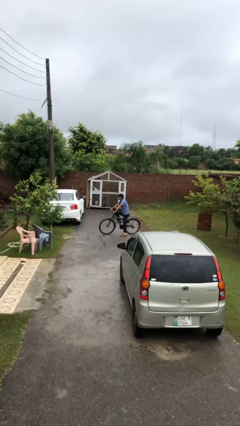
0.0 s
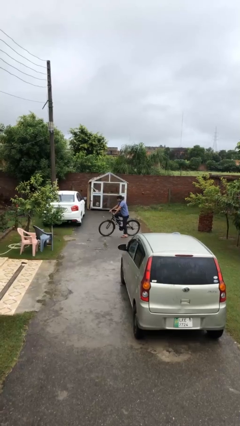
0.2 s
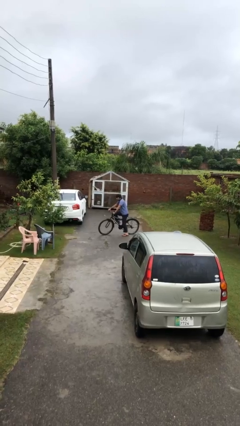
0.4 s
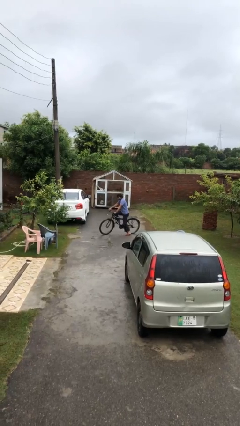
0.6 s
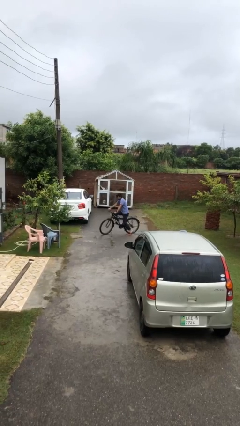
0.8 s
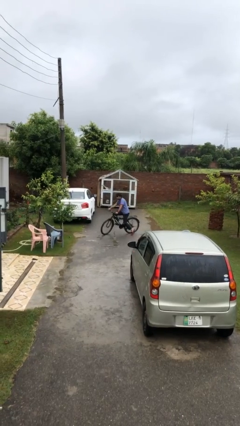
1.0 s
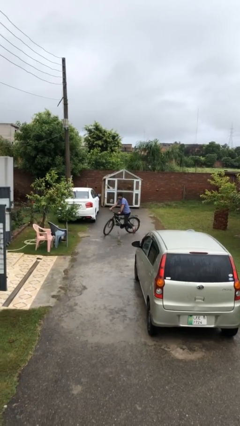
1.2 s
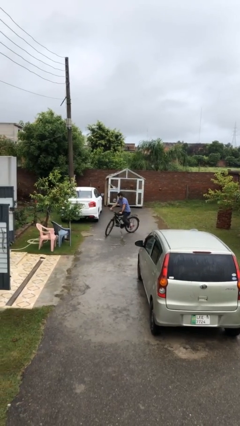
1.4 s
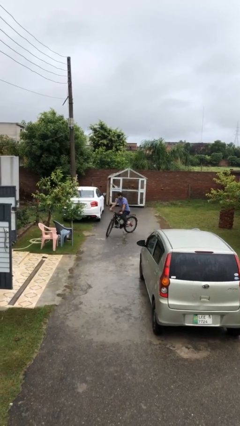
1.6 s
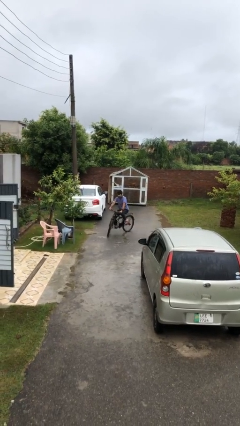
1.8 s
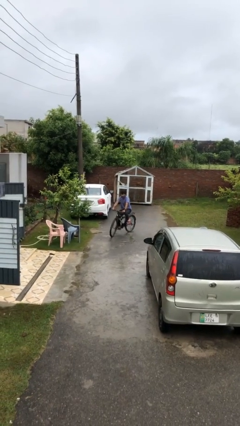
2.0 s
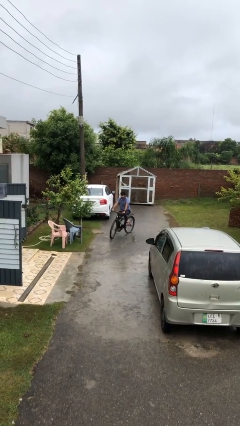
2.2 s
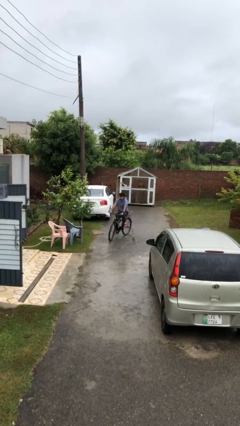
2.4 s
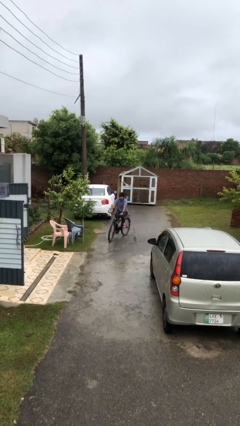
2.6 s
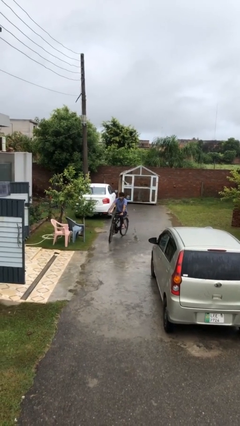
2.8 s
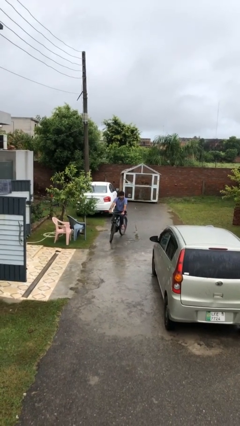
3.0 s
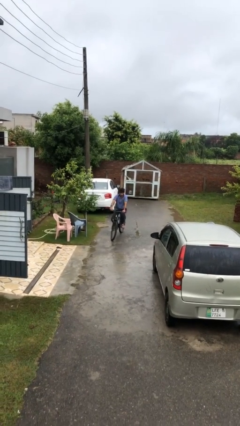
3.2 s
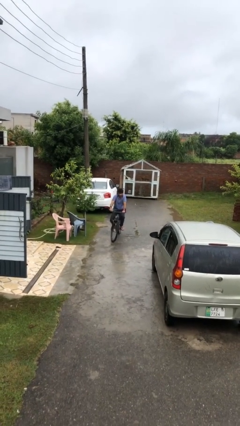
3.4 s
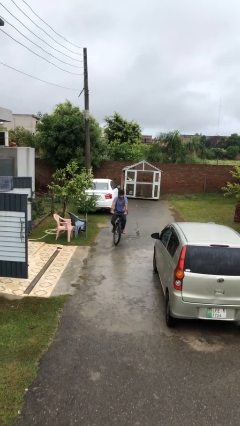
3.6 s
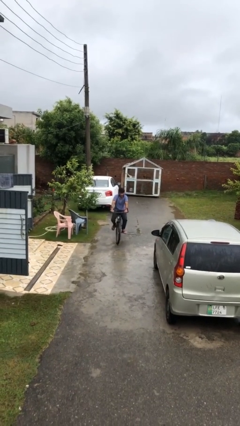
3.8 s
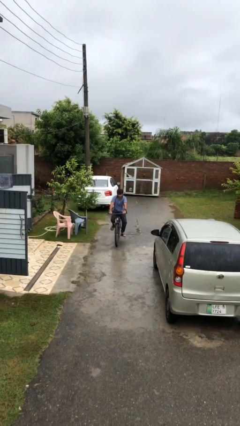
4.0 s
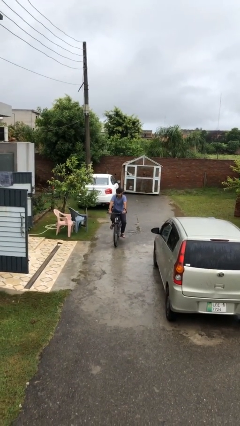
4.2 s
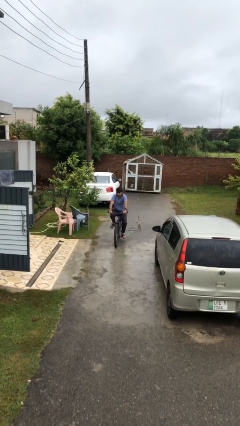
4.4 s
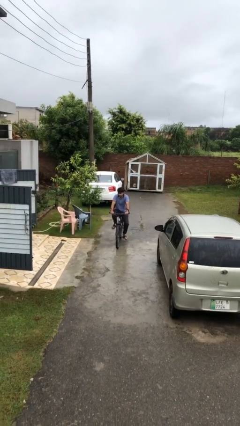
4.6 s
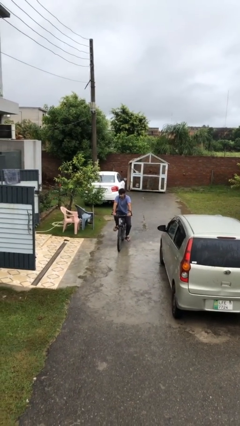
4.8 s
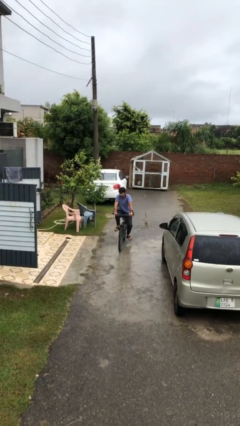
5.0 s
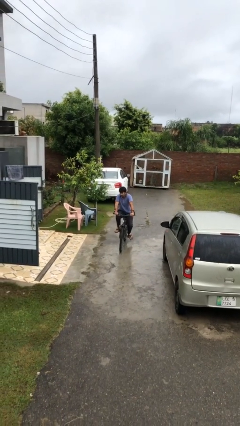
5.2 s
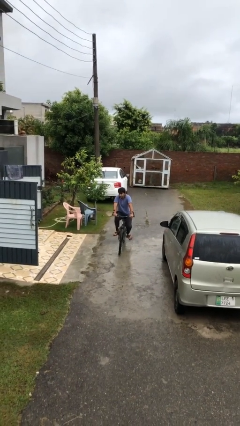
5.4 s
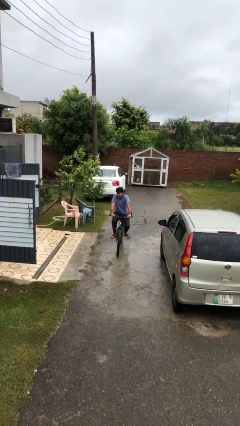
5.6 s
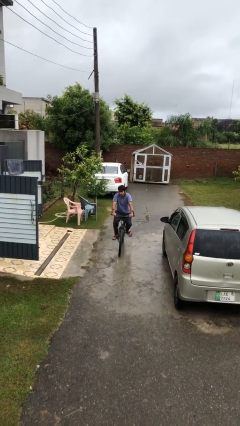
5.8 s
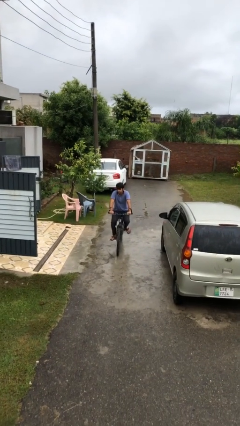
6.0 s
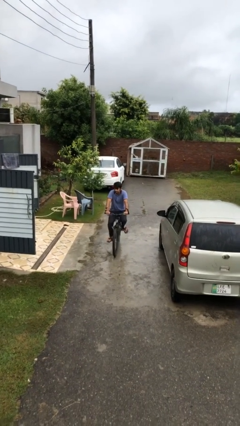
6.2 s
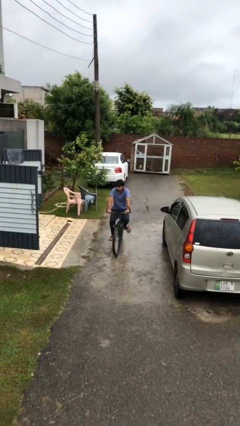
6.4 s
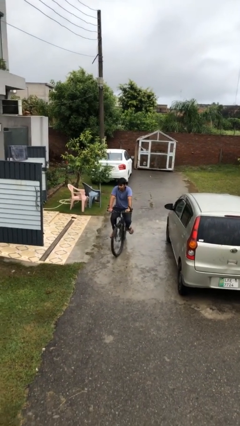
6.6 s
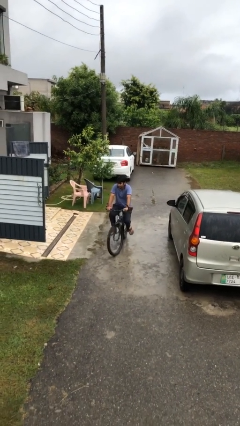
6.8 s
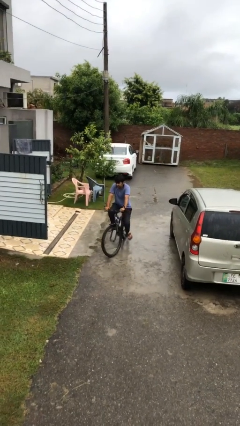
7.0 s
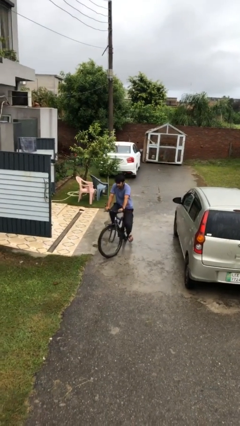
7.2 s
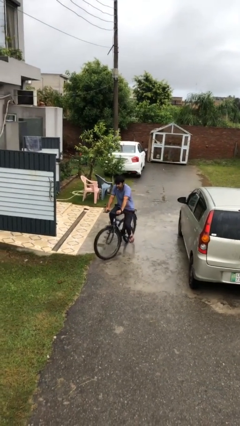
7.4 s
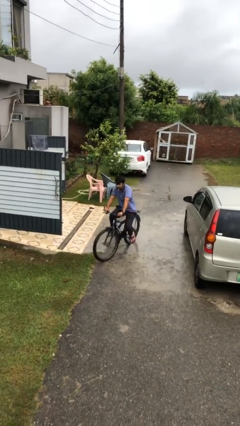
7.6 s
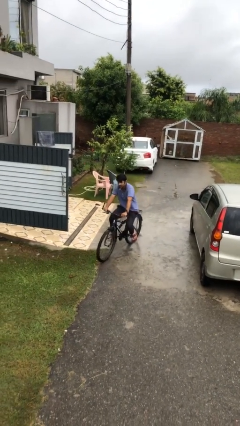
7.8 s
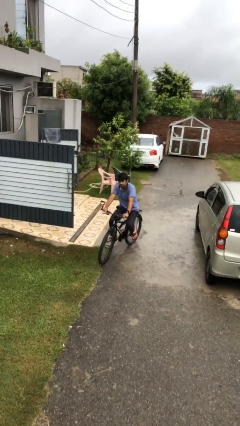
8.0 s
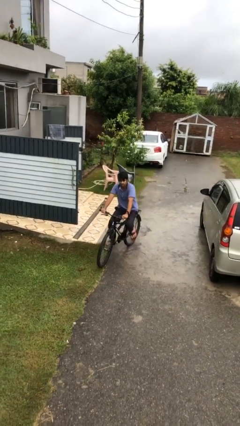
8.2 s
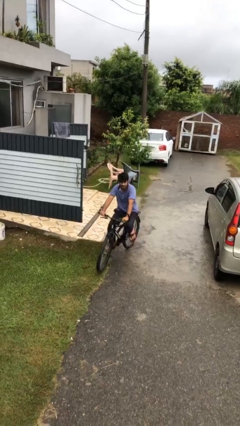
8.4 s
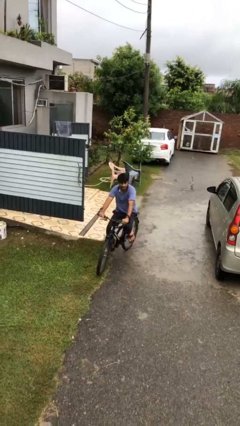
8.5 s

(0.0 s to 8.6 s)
person rides bicycle

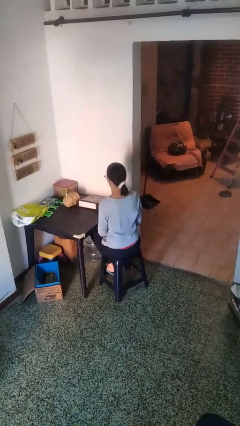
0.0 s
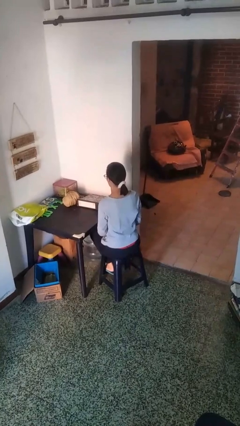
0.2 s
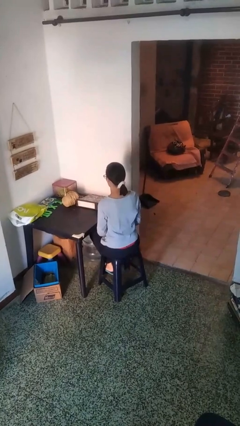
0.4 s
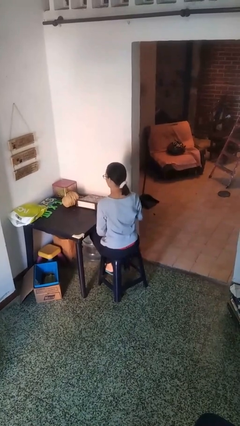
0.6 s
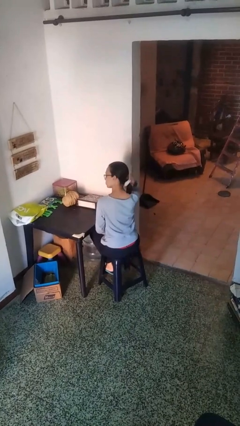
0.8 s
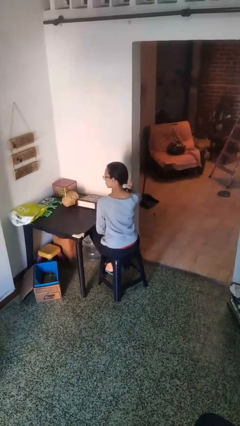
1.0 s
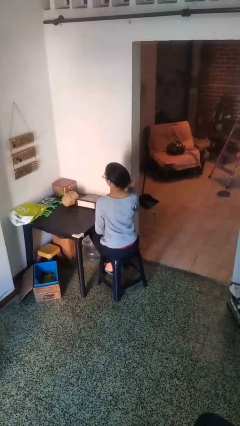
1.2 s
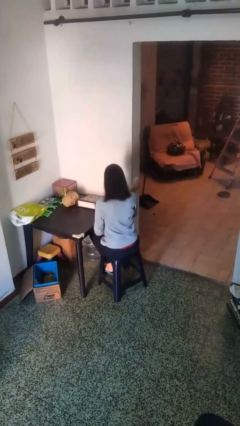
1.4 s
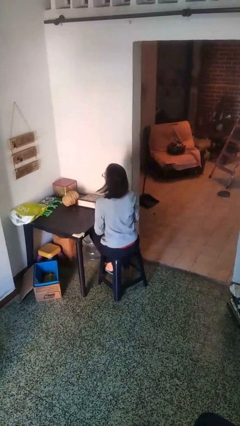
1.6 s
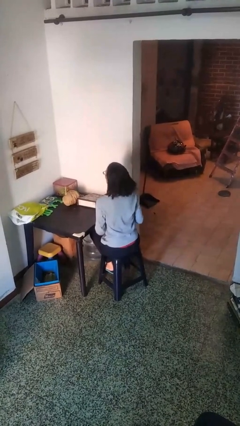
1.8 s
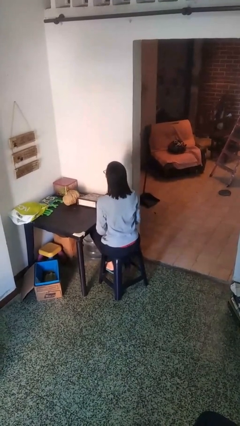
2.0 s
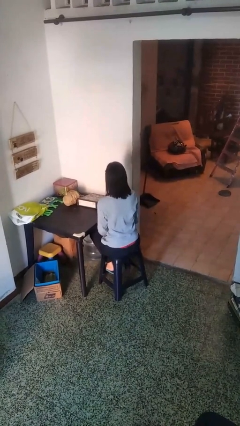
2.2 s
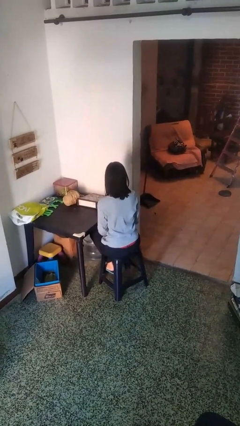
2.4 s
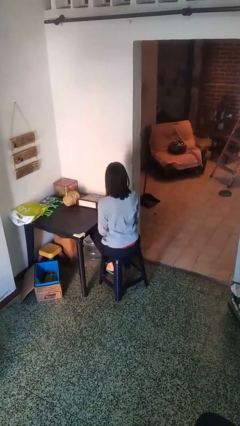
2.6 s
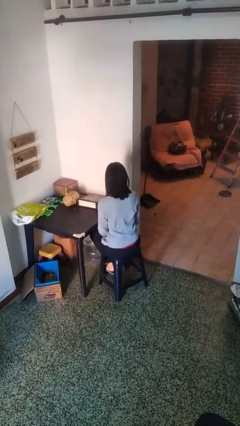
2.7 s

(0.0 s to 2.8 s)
person takes off hairtie

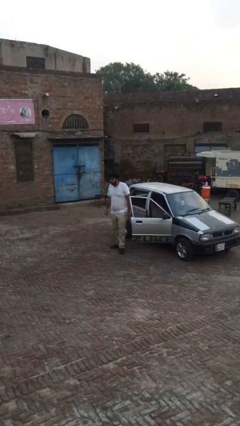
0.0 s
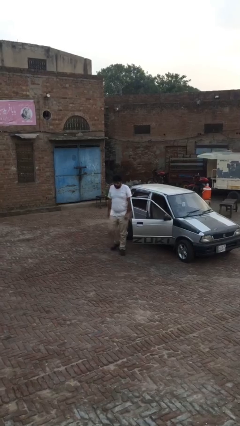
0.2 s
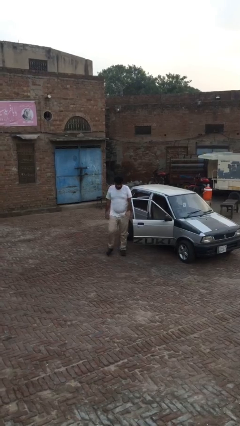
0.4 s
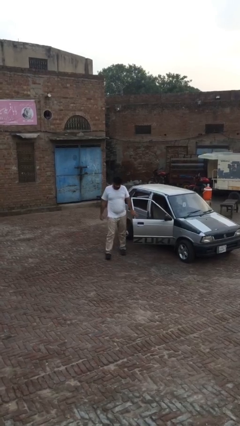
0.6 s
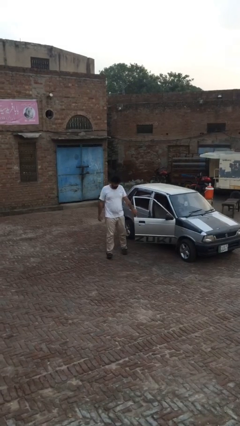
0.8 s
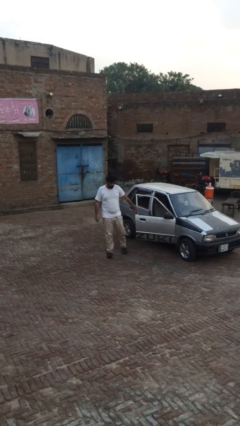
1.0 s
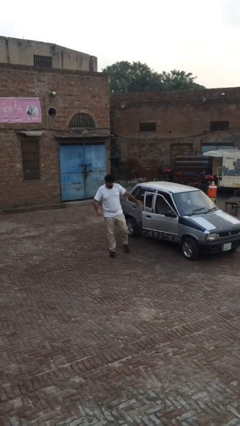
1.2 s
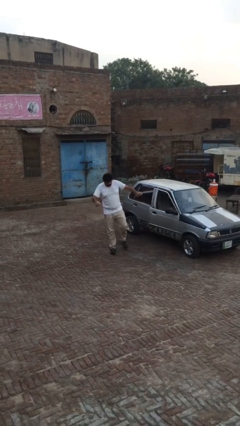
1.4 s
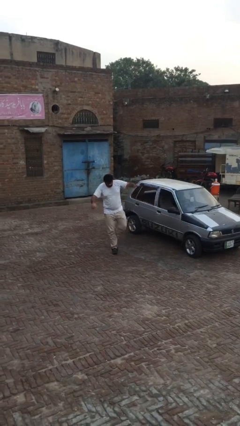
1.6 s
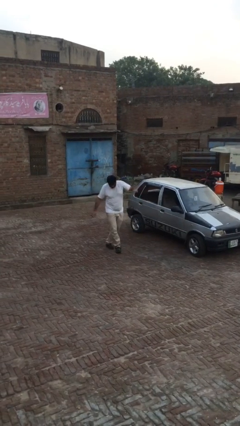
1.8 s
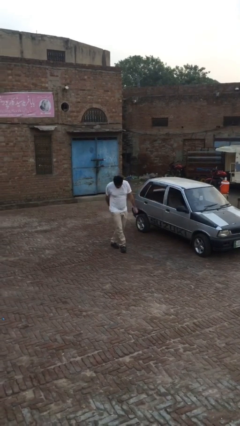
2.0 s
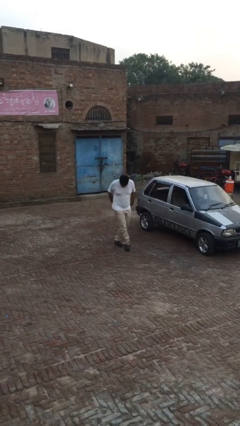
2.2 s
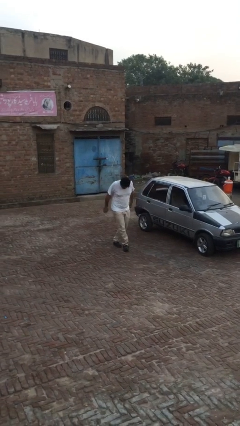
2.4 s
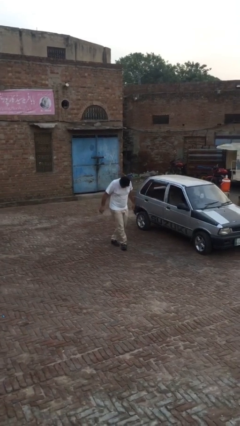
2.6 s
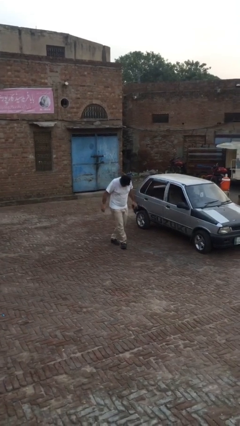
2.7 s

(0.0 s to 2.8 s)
person closes car door

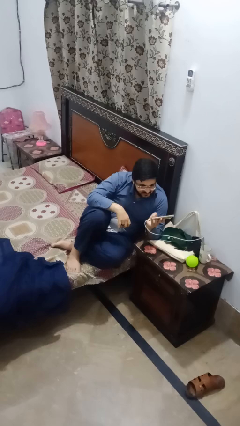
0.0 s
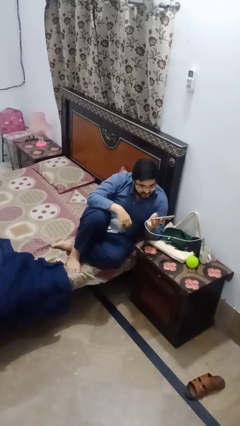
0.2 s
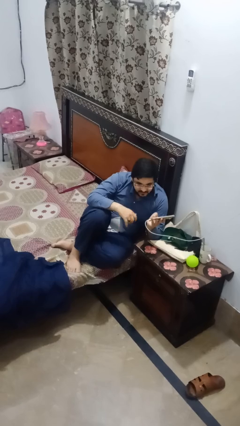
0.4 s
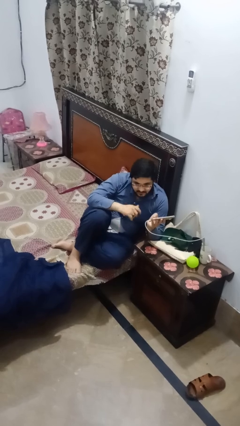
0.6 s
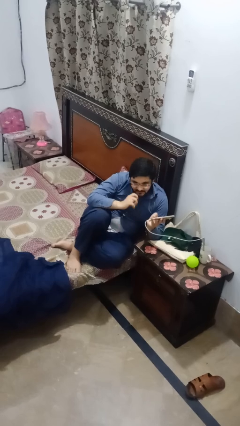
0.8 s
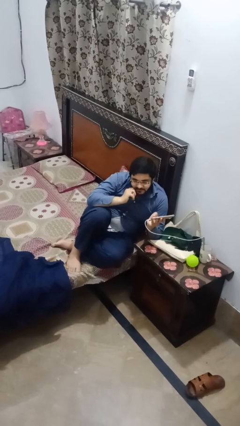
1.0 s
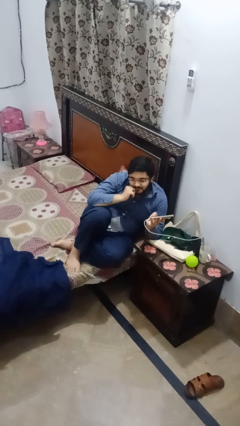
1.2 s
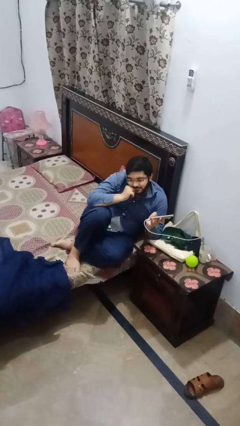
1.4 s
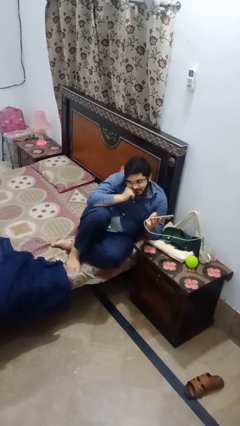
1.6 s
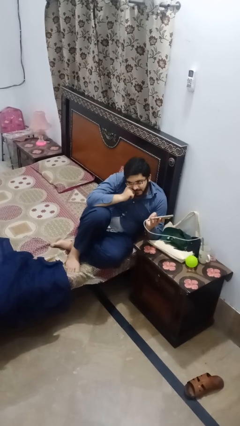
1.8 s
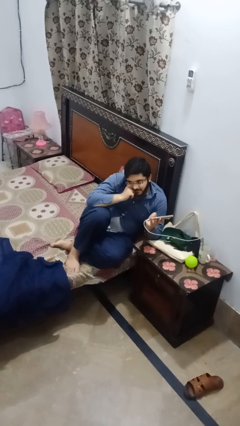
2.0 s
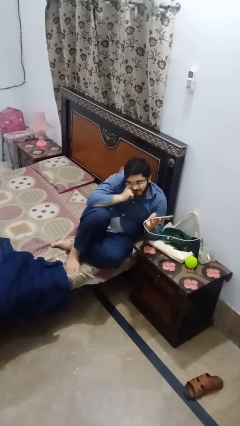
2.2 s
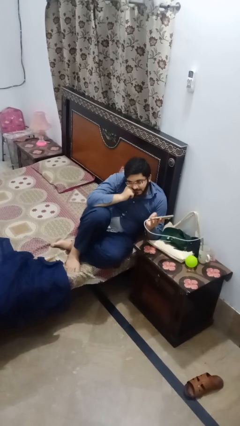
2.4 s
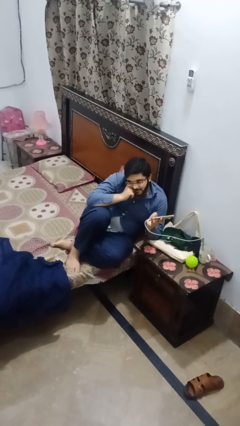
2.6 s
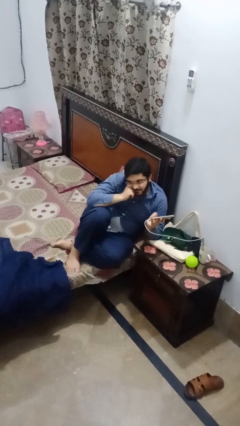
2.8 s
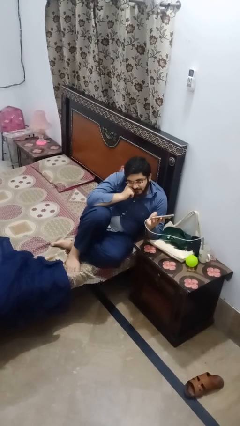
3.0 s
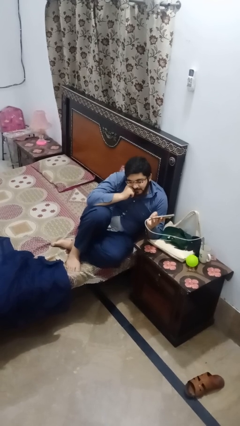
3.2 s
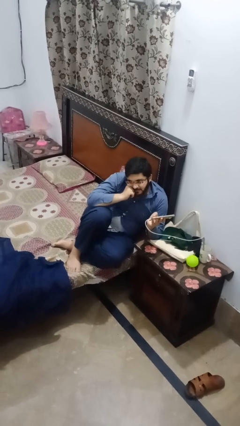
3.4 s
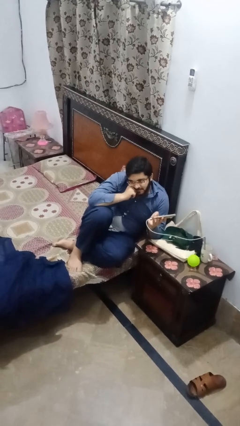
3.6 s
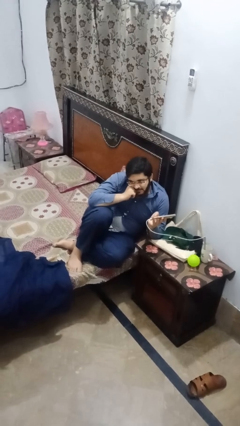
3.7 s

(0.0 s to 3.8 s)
person strokes chin
